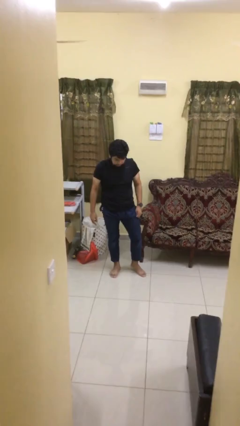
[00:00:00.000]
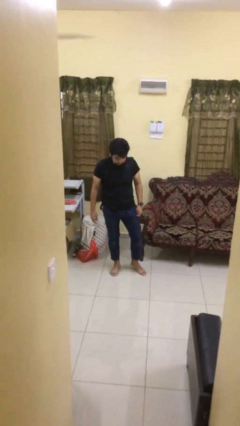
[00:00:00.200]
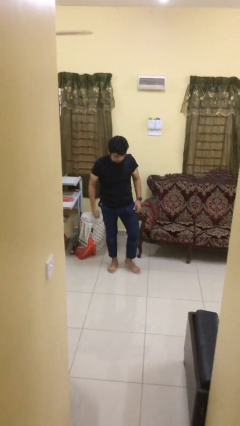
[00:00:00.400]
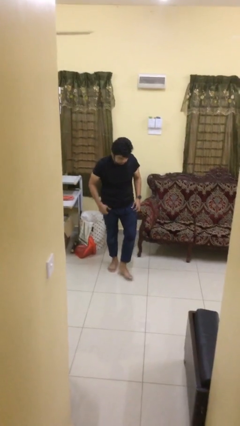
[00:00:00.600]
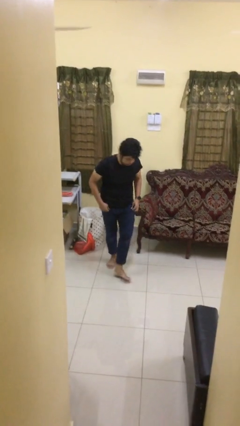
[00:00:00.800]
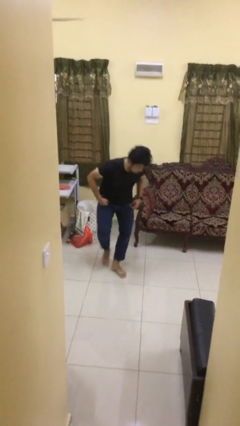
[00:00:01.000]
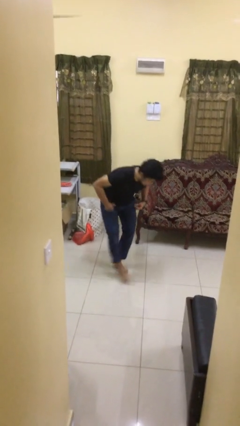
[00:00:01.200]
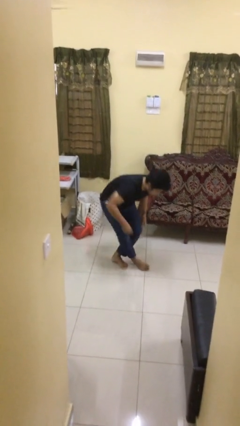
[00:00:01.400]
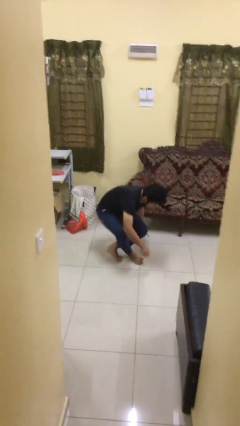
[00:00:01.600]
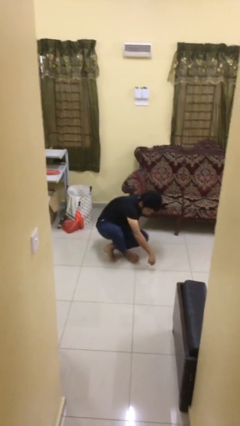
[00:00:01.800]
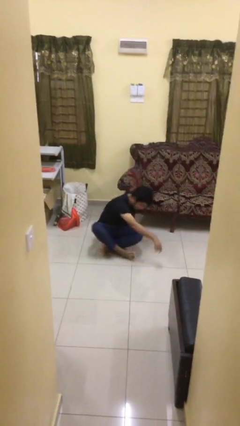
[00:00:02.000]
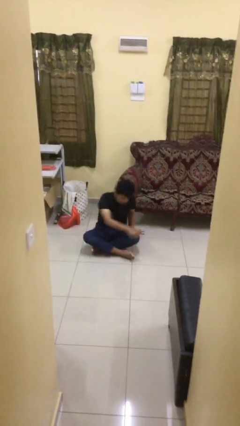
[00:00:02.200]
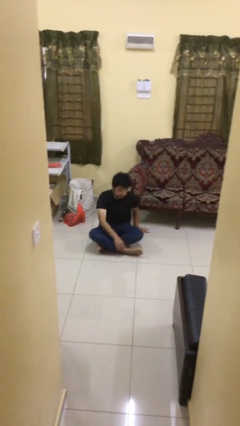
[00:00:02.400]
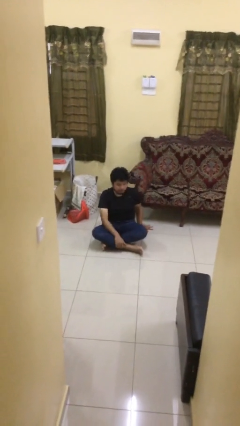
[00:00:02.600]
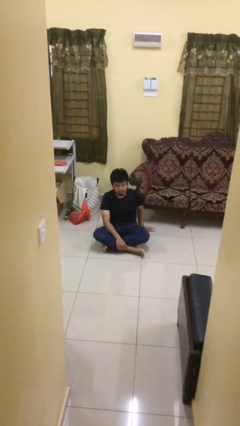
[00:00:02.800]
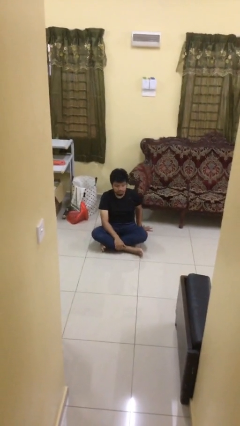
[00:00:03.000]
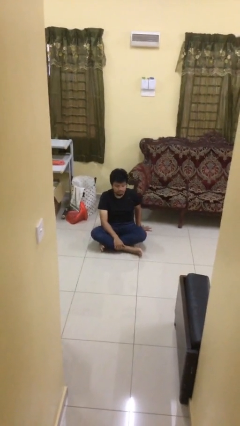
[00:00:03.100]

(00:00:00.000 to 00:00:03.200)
person sits crisscross

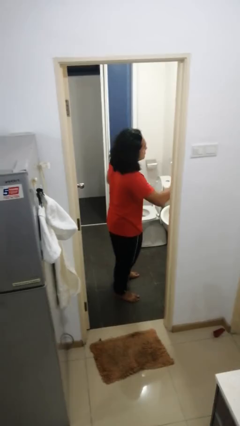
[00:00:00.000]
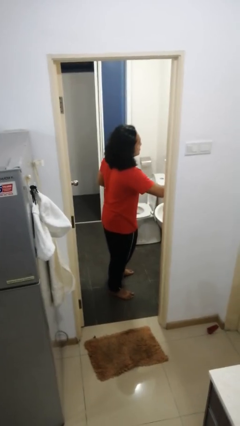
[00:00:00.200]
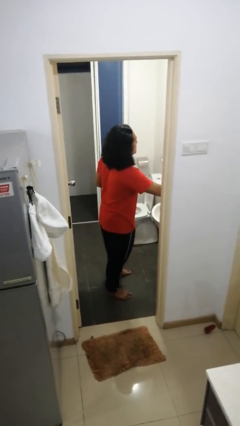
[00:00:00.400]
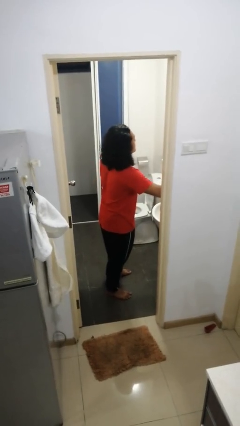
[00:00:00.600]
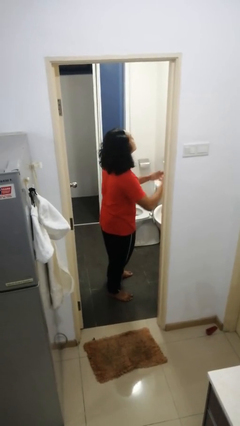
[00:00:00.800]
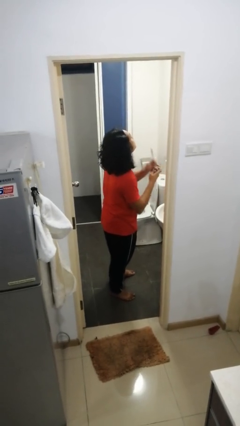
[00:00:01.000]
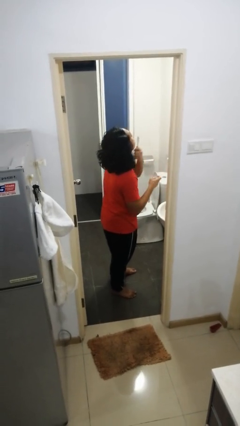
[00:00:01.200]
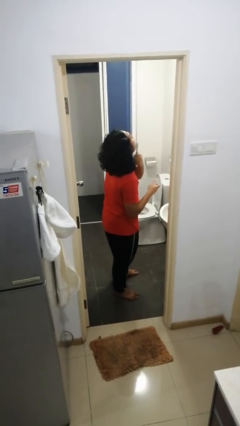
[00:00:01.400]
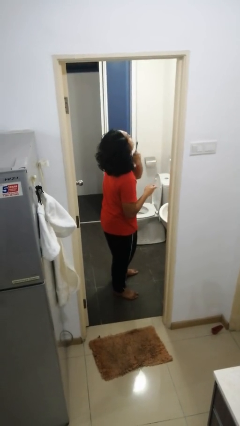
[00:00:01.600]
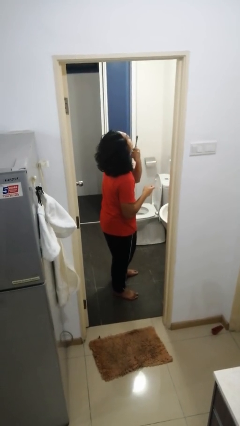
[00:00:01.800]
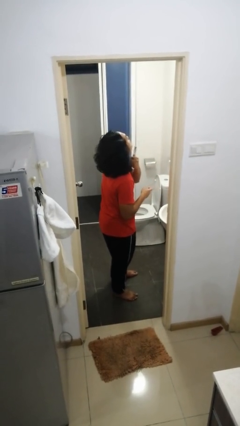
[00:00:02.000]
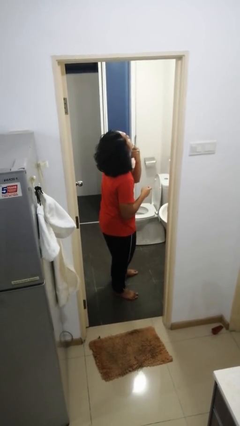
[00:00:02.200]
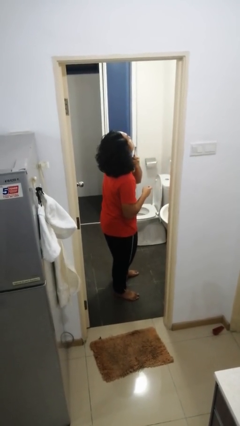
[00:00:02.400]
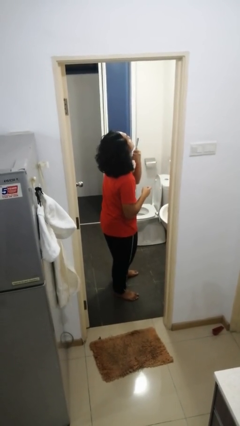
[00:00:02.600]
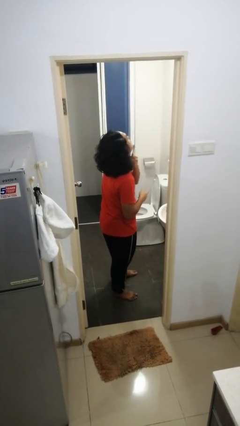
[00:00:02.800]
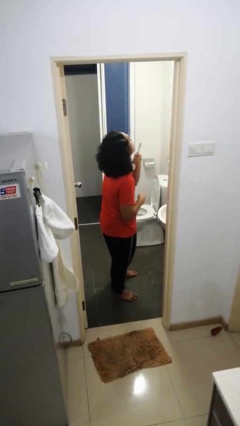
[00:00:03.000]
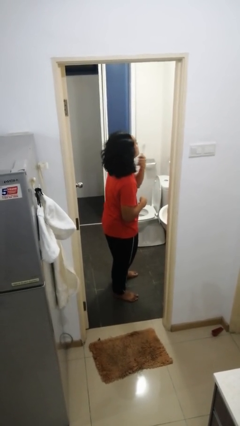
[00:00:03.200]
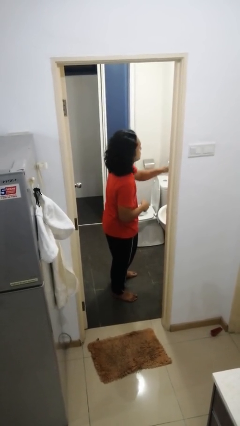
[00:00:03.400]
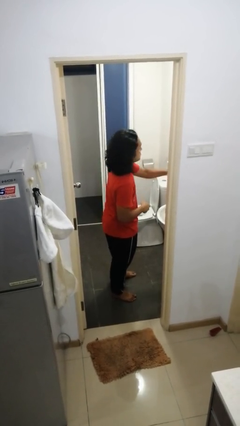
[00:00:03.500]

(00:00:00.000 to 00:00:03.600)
person shaves face

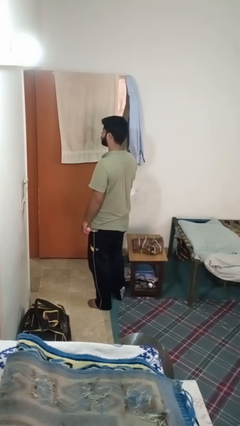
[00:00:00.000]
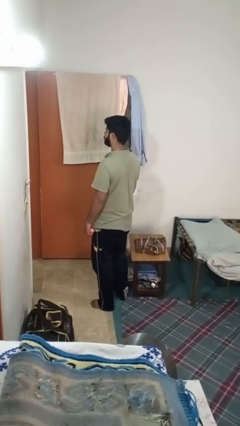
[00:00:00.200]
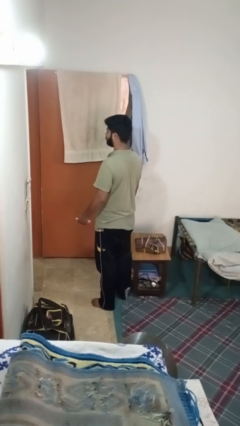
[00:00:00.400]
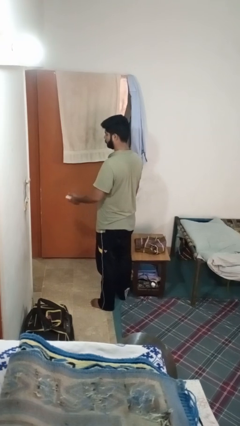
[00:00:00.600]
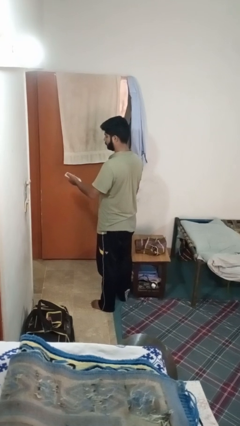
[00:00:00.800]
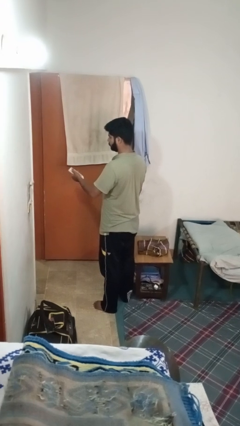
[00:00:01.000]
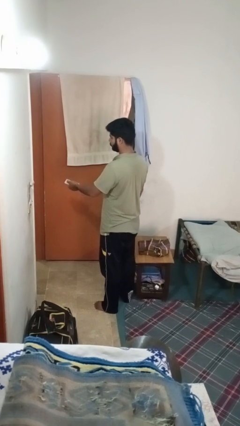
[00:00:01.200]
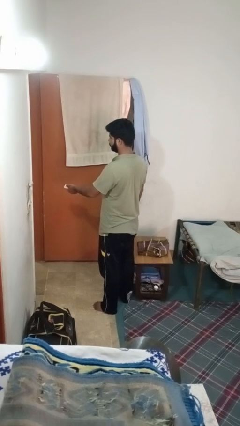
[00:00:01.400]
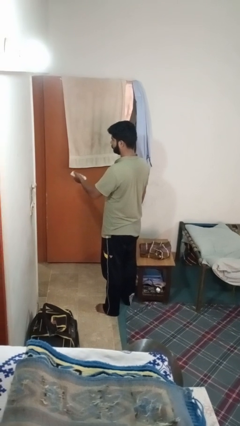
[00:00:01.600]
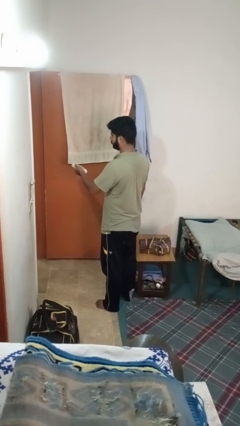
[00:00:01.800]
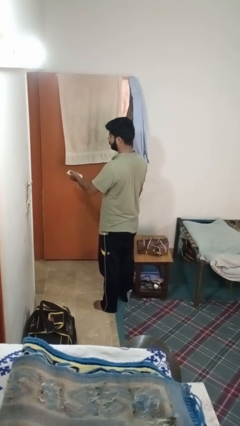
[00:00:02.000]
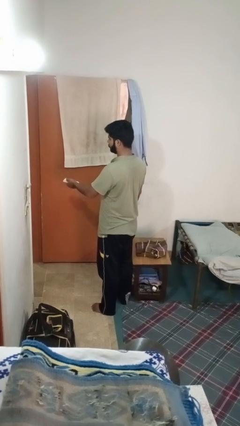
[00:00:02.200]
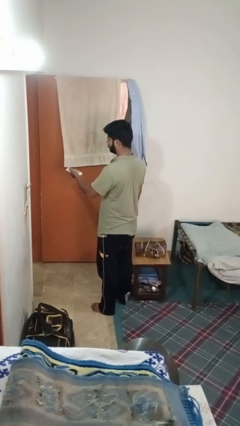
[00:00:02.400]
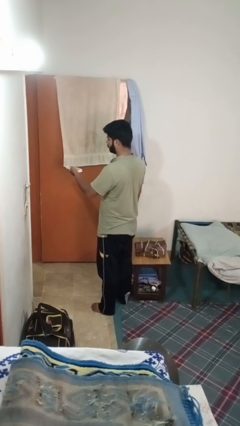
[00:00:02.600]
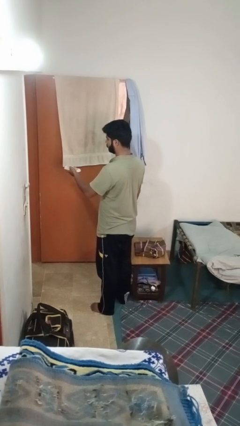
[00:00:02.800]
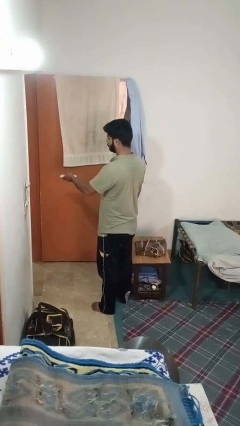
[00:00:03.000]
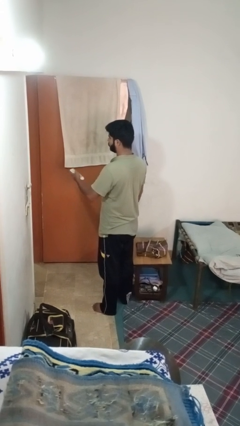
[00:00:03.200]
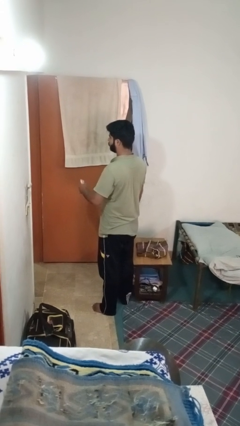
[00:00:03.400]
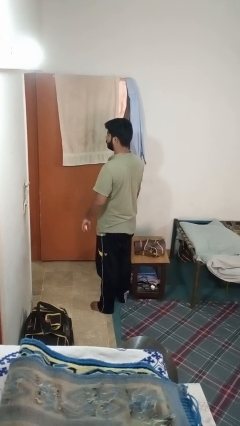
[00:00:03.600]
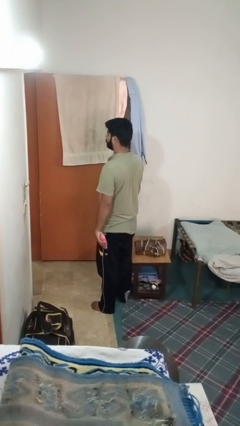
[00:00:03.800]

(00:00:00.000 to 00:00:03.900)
person uses television remote

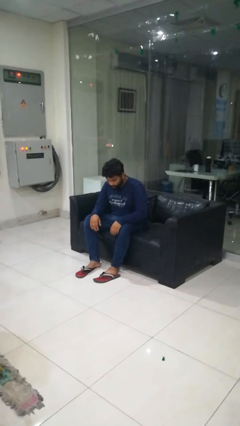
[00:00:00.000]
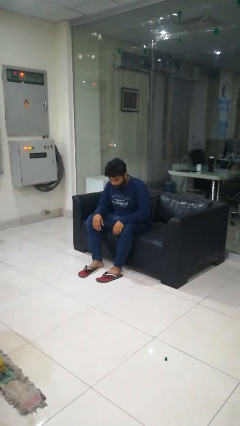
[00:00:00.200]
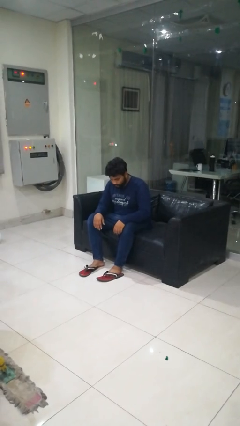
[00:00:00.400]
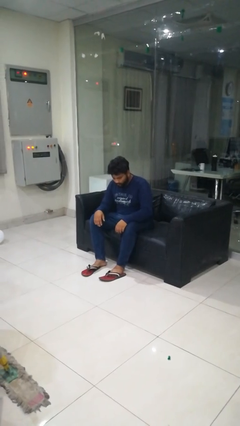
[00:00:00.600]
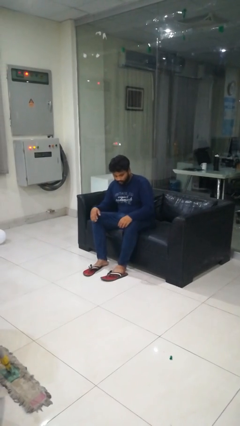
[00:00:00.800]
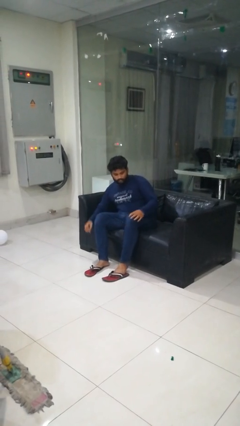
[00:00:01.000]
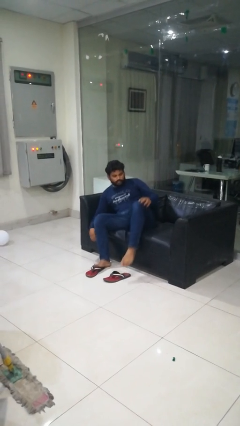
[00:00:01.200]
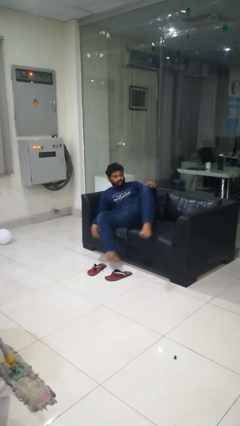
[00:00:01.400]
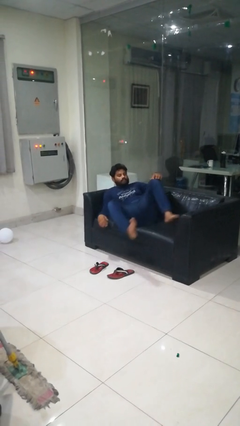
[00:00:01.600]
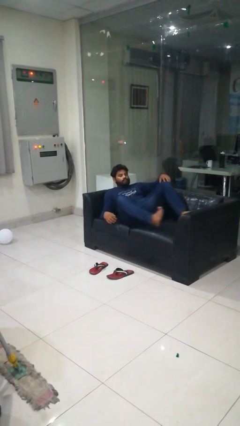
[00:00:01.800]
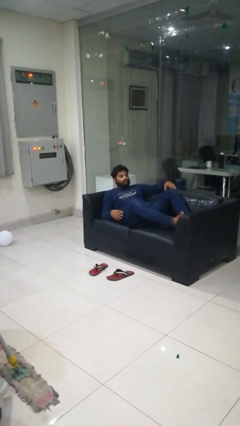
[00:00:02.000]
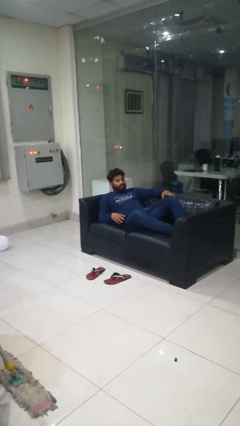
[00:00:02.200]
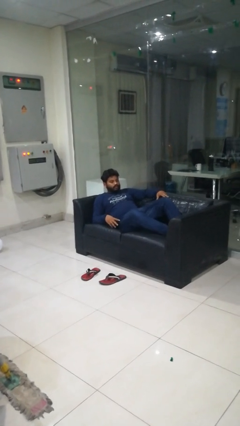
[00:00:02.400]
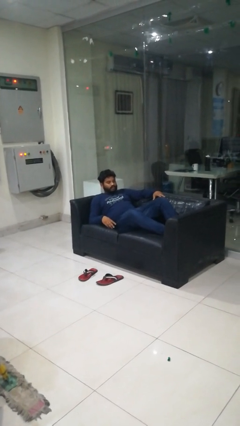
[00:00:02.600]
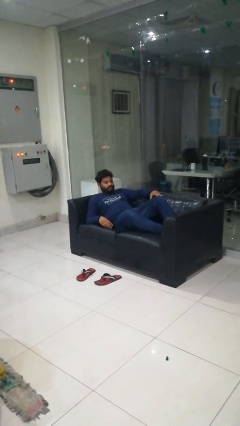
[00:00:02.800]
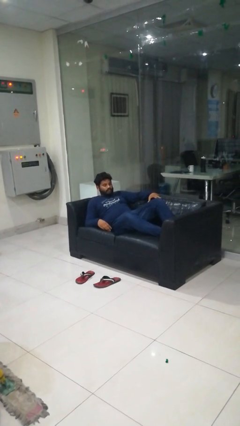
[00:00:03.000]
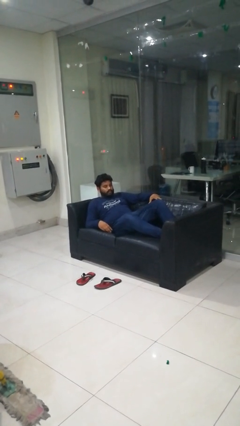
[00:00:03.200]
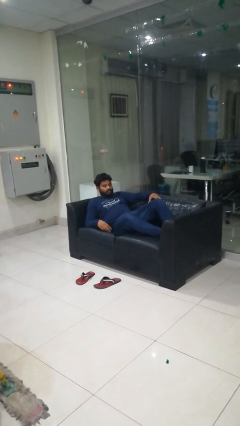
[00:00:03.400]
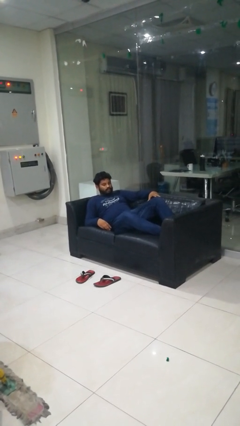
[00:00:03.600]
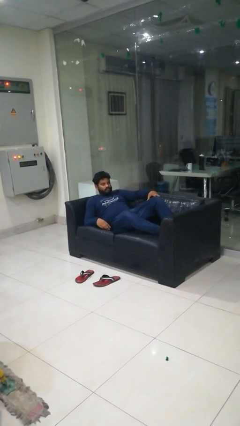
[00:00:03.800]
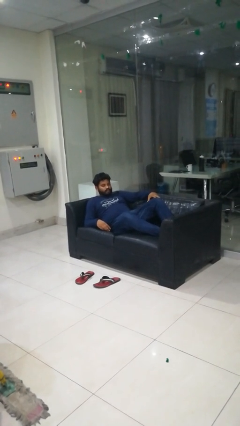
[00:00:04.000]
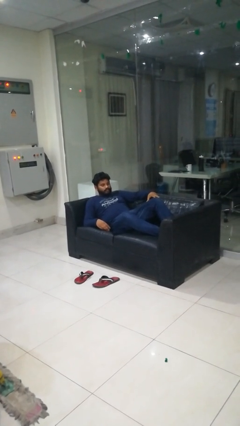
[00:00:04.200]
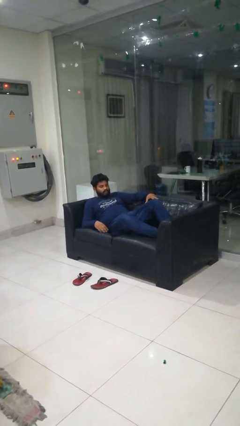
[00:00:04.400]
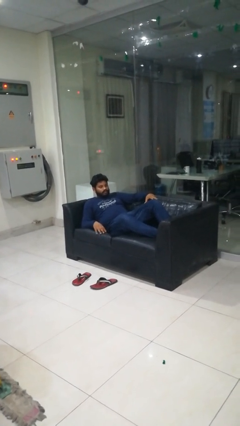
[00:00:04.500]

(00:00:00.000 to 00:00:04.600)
person lies down on couch

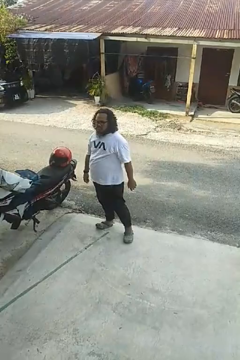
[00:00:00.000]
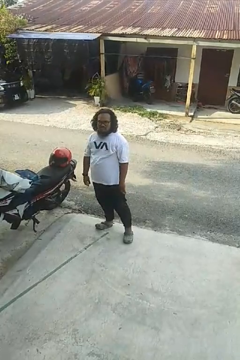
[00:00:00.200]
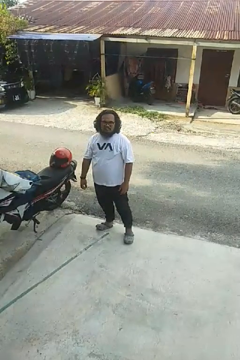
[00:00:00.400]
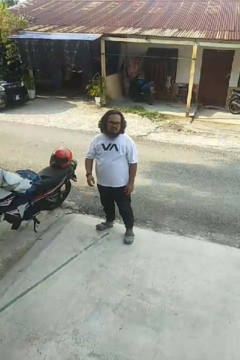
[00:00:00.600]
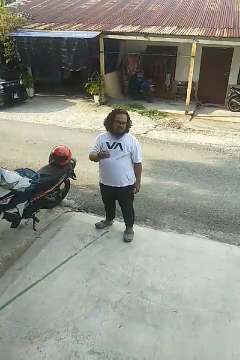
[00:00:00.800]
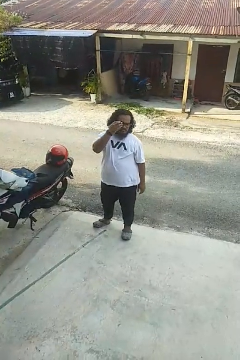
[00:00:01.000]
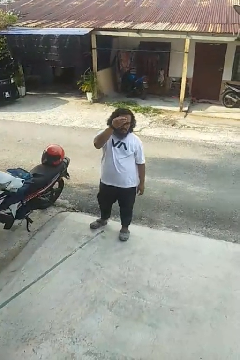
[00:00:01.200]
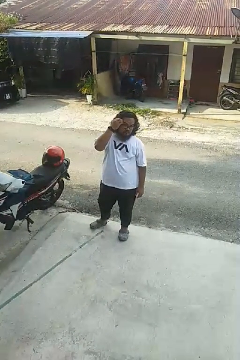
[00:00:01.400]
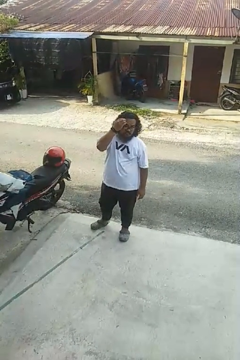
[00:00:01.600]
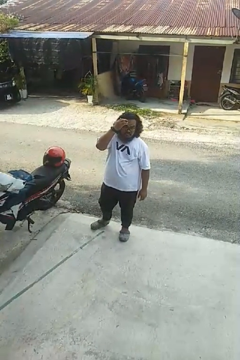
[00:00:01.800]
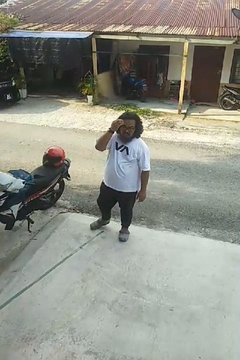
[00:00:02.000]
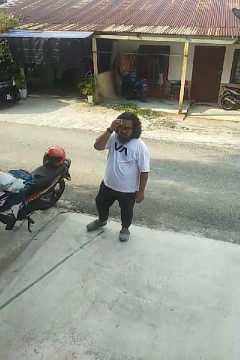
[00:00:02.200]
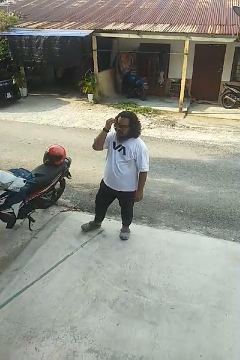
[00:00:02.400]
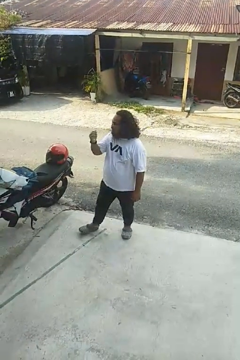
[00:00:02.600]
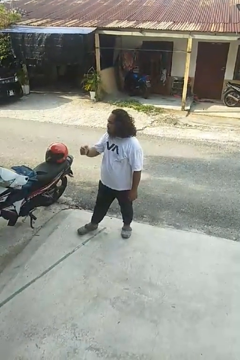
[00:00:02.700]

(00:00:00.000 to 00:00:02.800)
person scratches face
